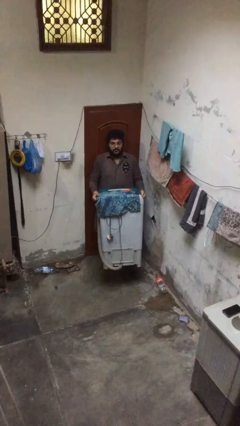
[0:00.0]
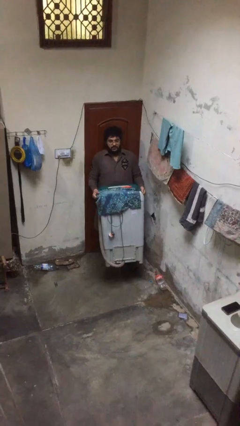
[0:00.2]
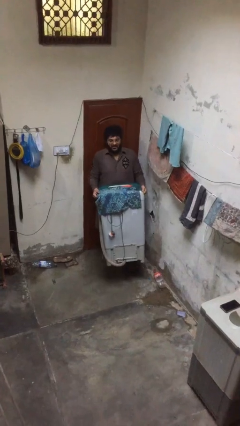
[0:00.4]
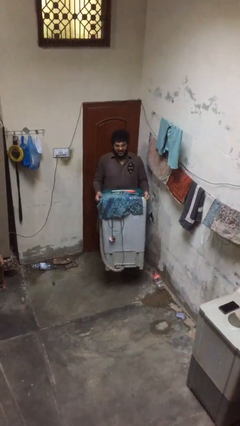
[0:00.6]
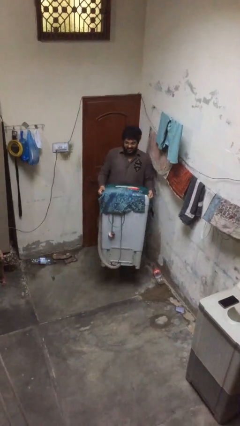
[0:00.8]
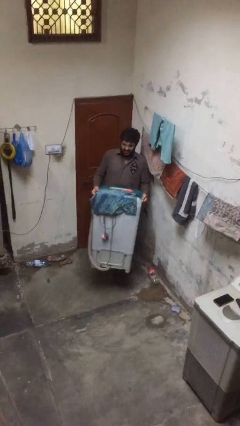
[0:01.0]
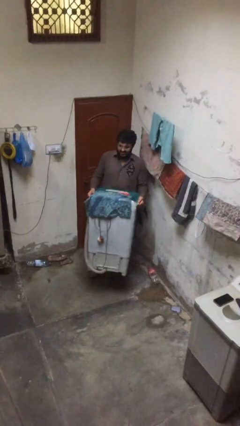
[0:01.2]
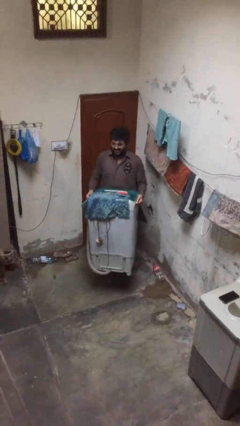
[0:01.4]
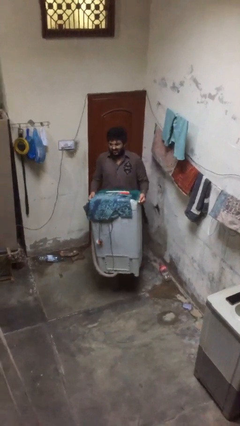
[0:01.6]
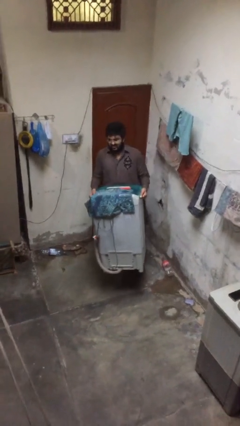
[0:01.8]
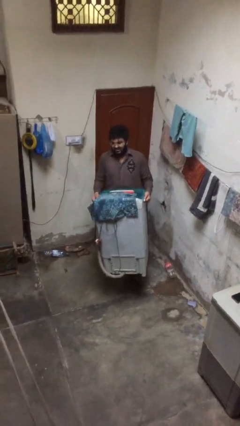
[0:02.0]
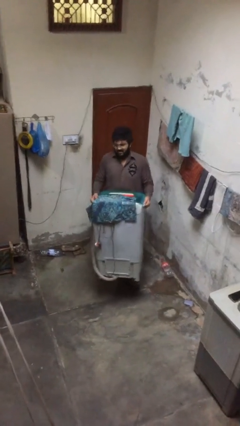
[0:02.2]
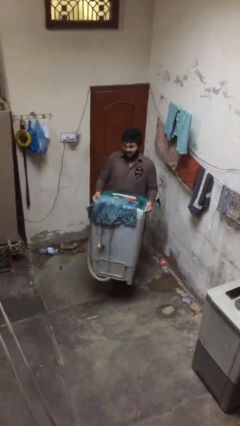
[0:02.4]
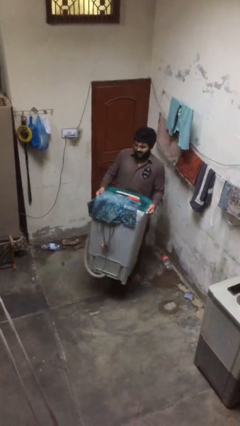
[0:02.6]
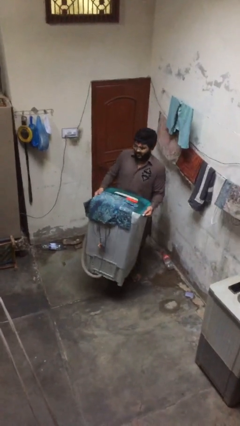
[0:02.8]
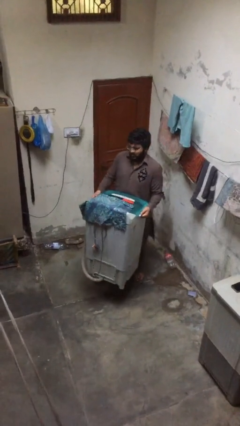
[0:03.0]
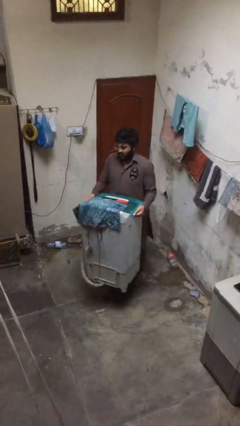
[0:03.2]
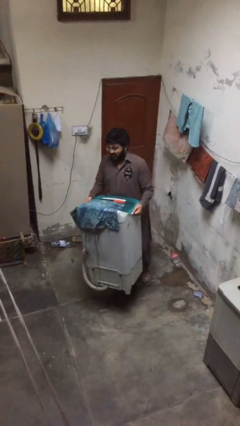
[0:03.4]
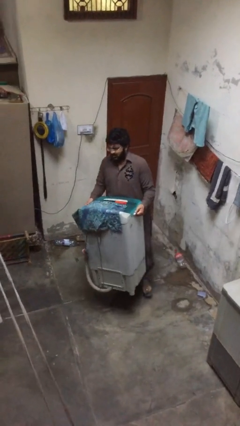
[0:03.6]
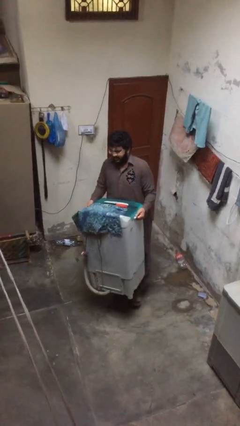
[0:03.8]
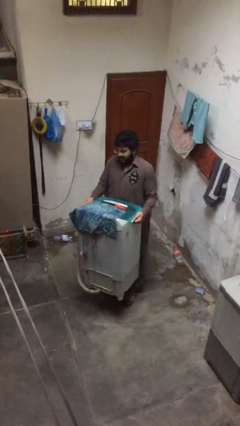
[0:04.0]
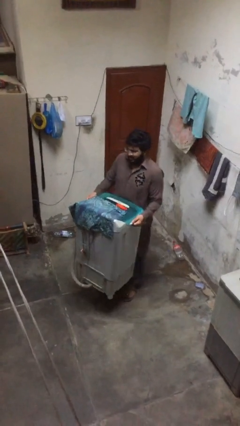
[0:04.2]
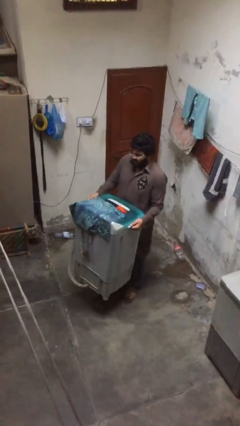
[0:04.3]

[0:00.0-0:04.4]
person carries heavy object

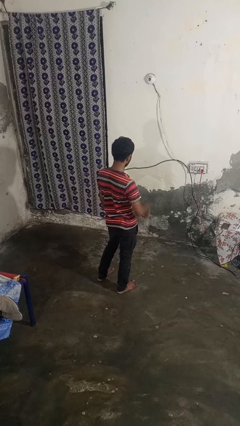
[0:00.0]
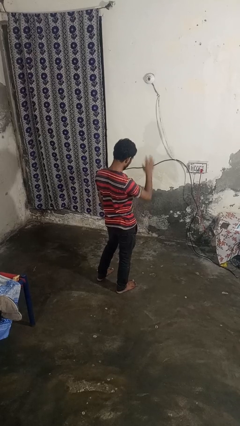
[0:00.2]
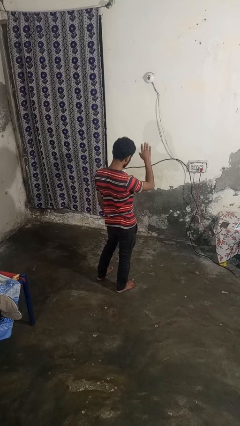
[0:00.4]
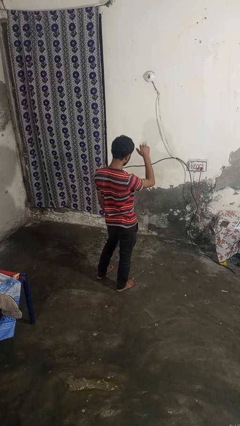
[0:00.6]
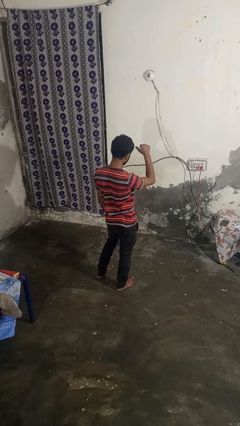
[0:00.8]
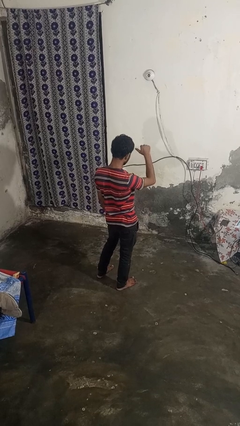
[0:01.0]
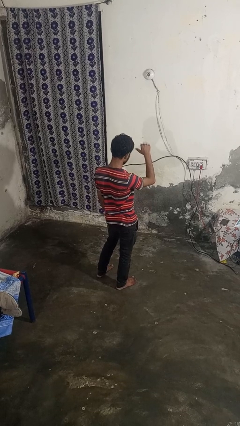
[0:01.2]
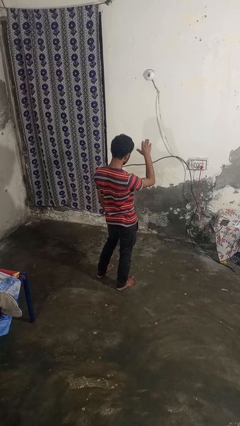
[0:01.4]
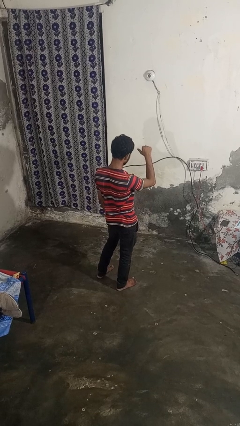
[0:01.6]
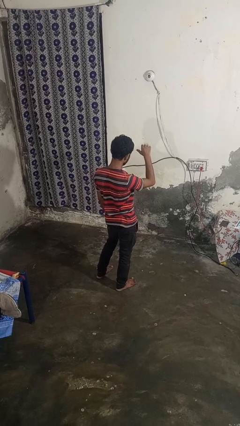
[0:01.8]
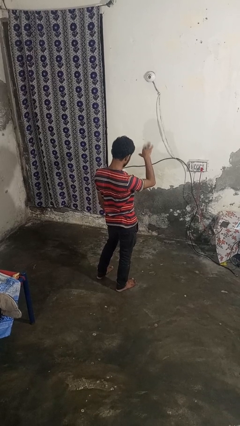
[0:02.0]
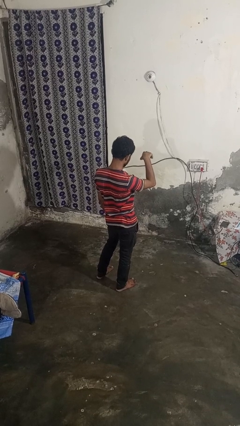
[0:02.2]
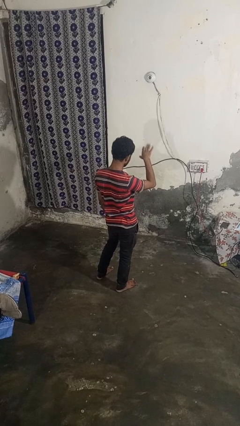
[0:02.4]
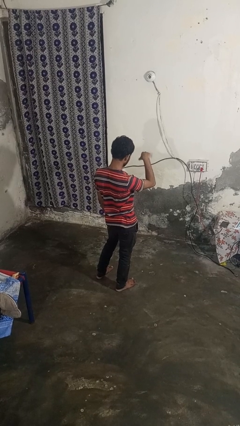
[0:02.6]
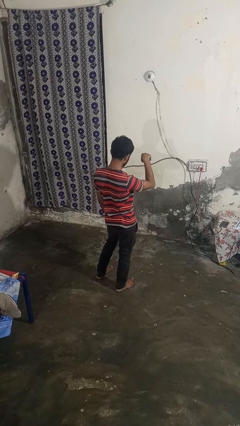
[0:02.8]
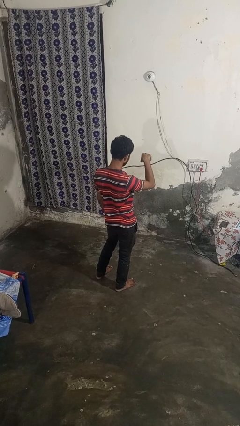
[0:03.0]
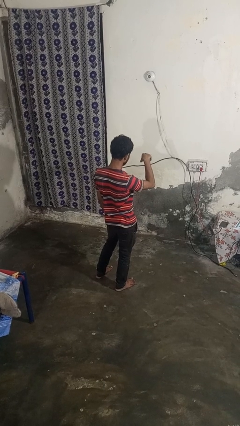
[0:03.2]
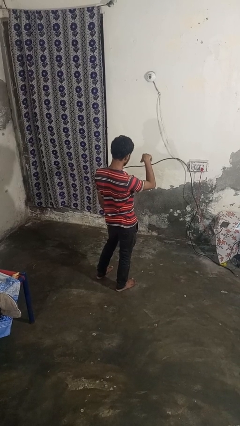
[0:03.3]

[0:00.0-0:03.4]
person gestures come here

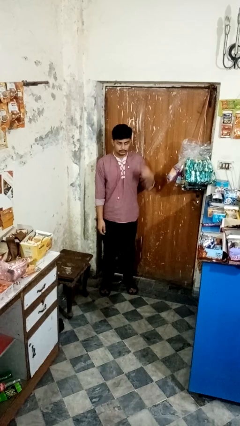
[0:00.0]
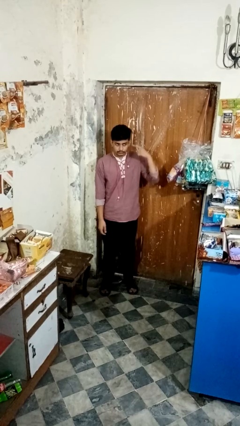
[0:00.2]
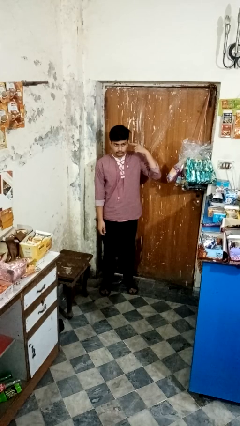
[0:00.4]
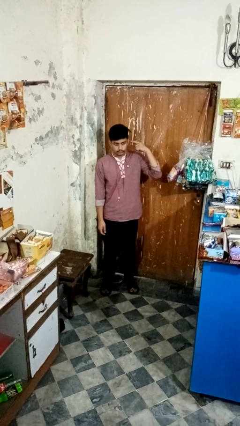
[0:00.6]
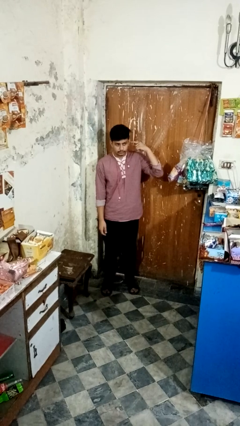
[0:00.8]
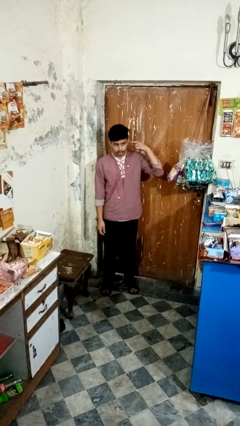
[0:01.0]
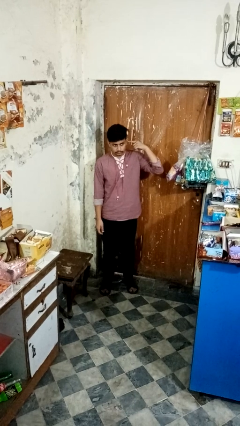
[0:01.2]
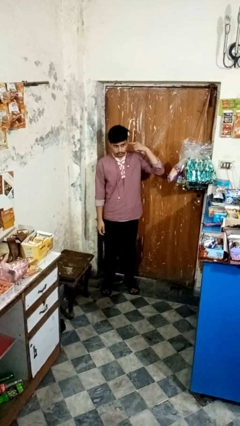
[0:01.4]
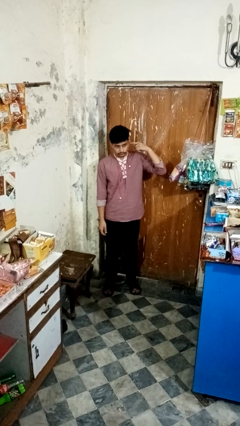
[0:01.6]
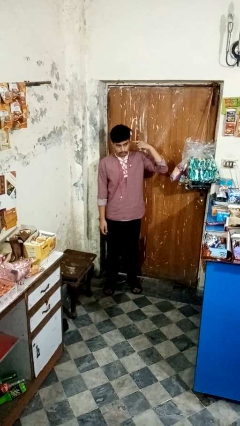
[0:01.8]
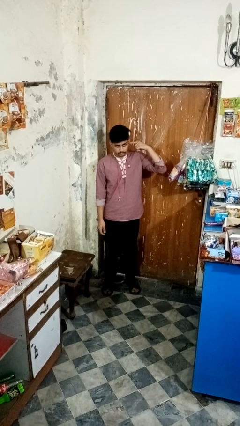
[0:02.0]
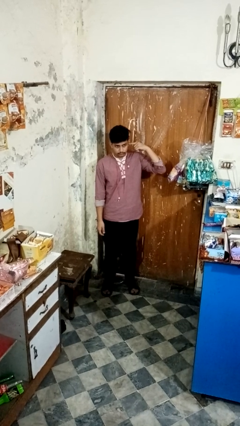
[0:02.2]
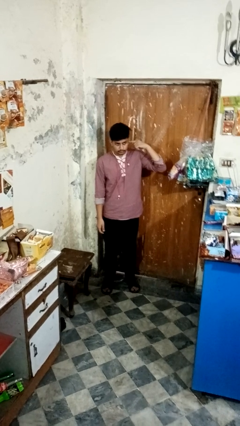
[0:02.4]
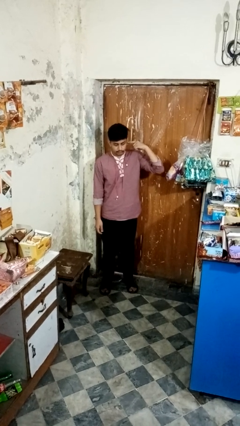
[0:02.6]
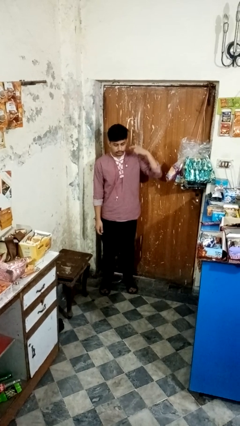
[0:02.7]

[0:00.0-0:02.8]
person gestures listen closely

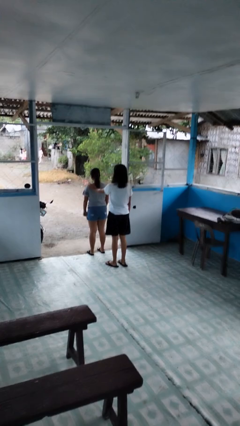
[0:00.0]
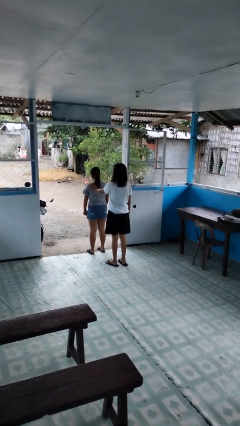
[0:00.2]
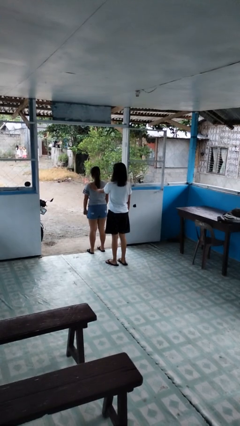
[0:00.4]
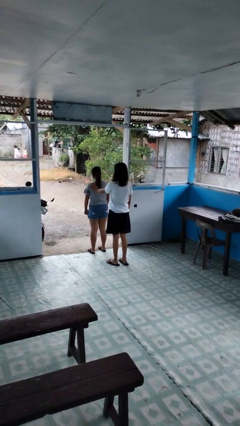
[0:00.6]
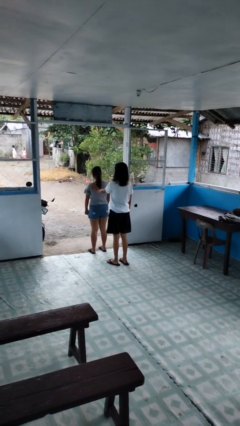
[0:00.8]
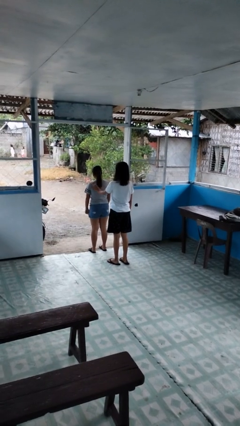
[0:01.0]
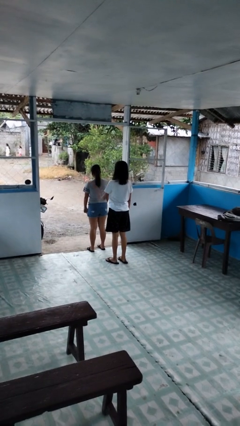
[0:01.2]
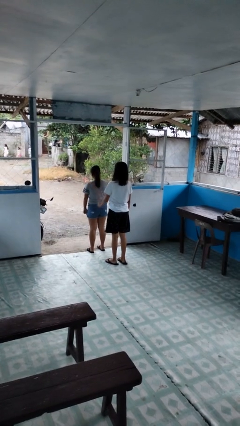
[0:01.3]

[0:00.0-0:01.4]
person touches back of person

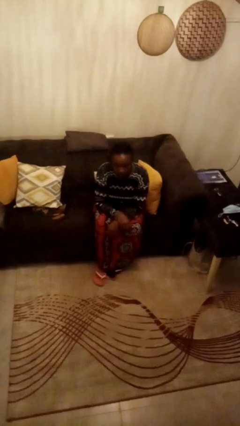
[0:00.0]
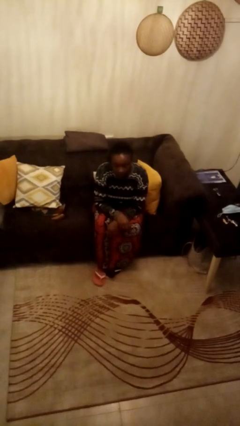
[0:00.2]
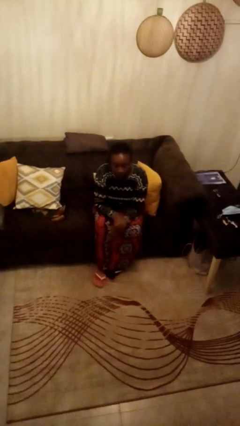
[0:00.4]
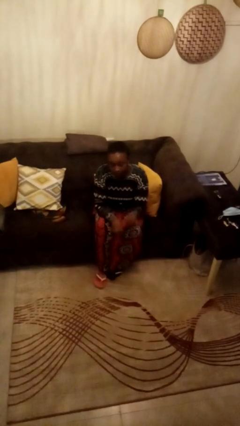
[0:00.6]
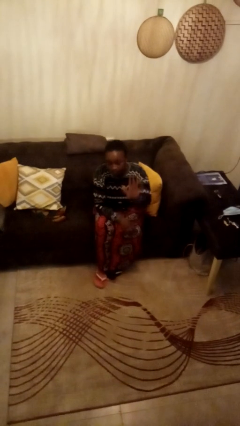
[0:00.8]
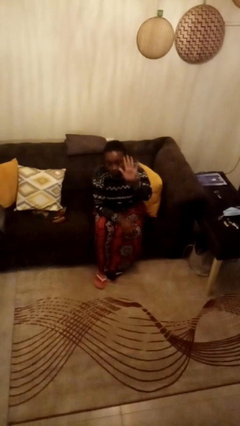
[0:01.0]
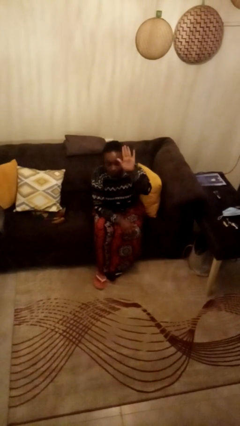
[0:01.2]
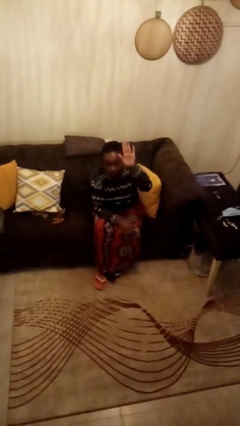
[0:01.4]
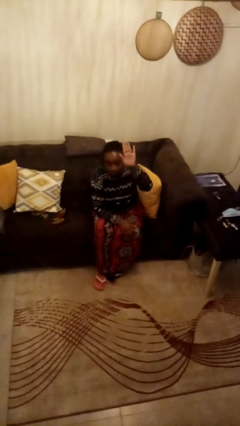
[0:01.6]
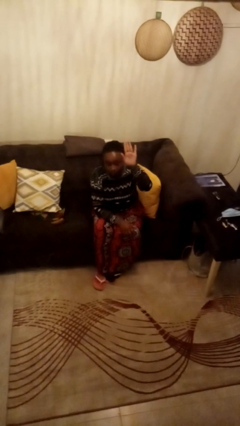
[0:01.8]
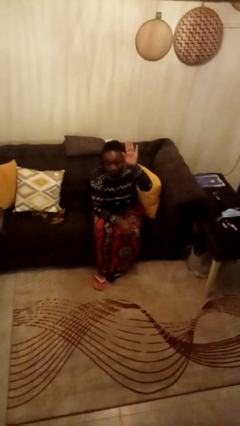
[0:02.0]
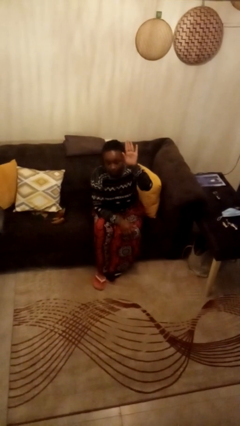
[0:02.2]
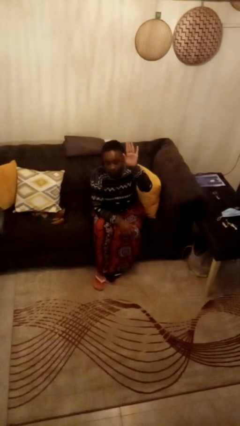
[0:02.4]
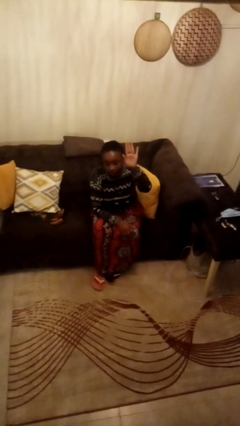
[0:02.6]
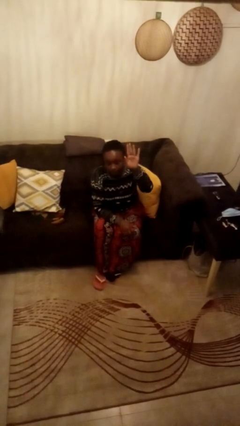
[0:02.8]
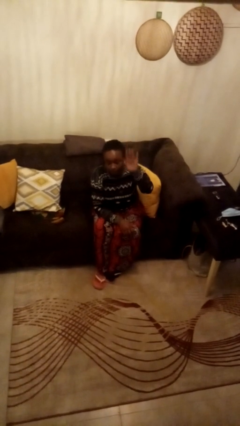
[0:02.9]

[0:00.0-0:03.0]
person gestures raise hand

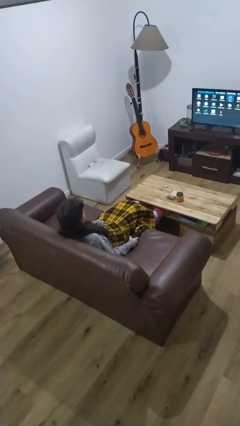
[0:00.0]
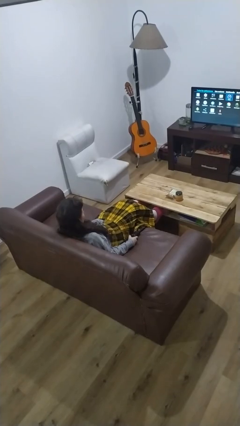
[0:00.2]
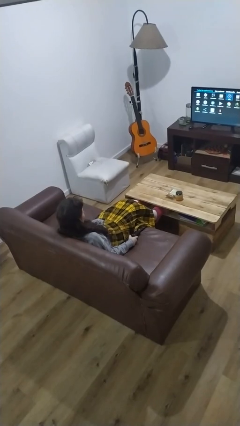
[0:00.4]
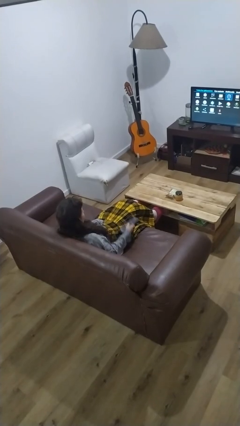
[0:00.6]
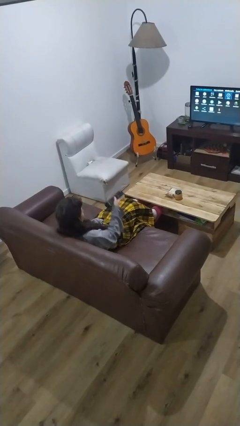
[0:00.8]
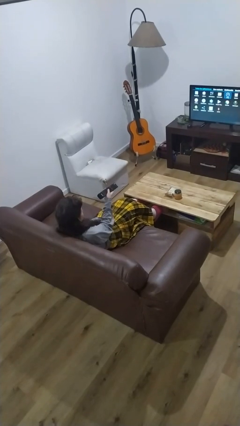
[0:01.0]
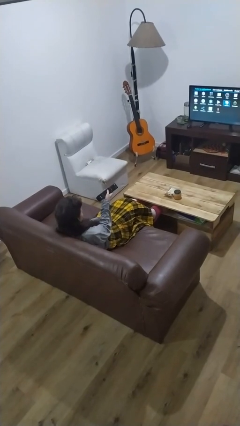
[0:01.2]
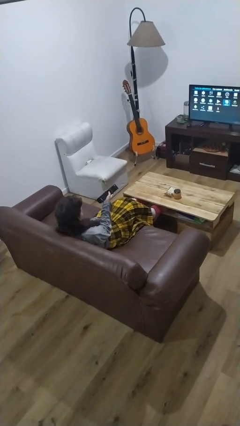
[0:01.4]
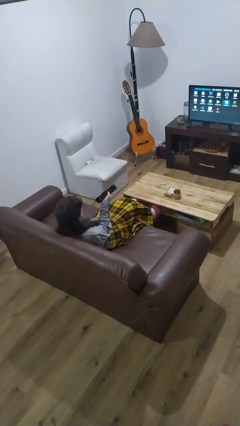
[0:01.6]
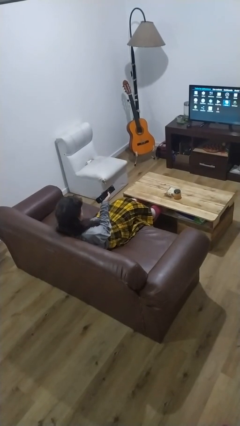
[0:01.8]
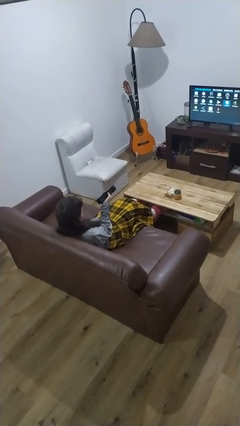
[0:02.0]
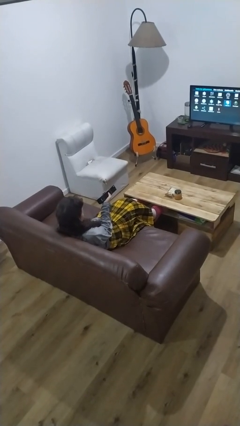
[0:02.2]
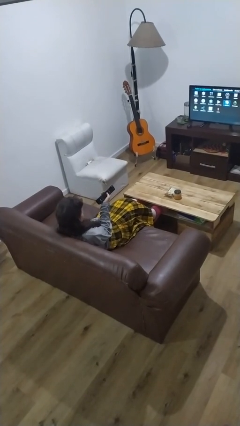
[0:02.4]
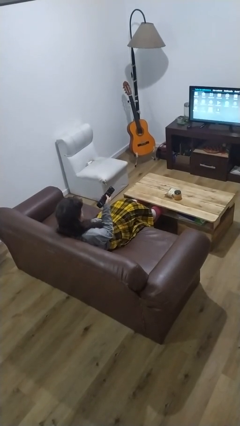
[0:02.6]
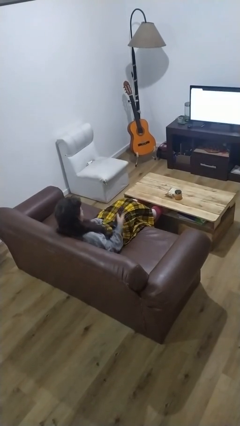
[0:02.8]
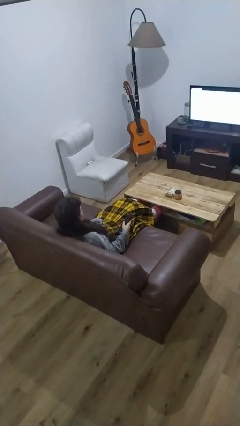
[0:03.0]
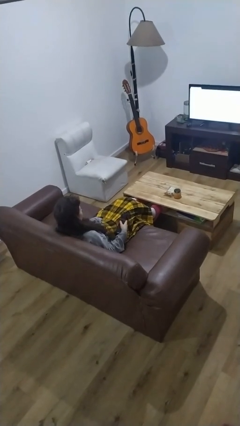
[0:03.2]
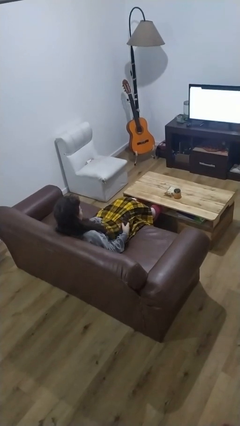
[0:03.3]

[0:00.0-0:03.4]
person uses television remote
